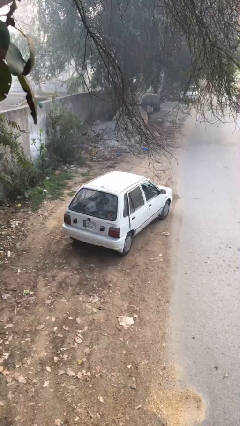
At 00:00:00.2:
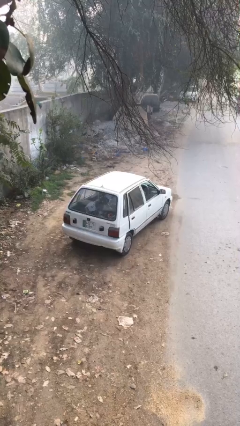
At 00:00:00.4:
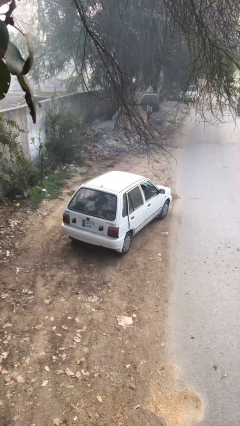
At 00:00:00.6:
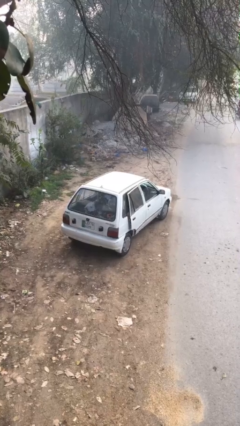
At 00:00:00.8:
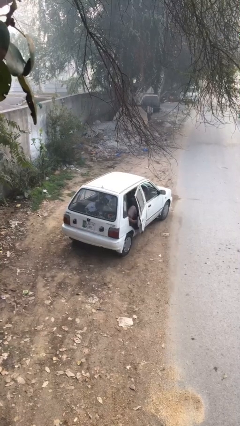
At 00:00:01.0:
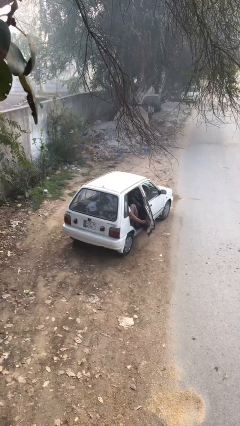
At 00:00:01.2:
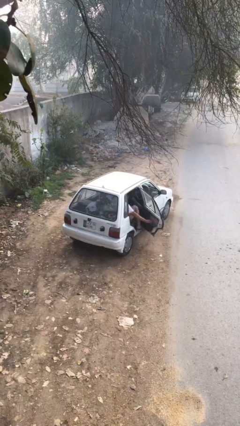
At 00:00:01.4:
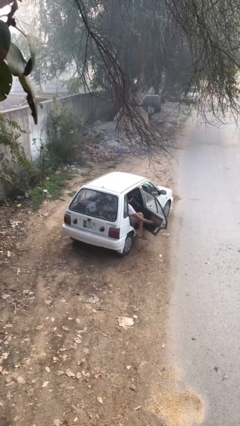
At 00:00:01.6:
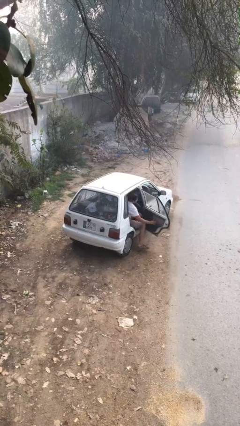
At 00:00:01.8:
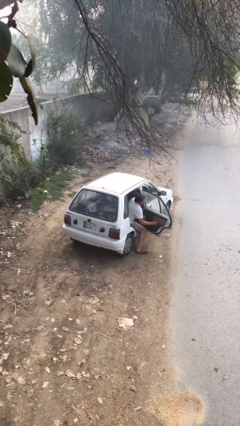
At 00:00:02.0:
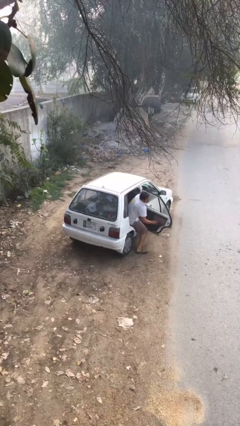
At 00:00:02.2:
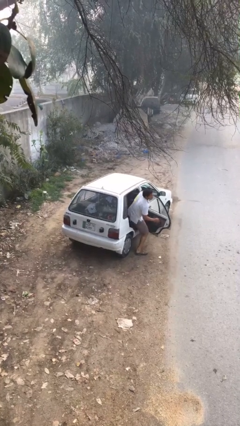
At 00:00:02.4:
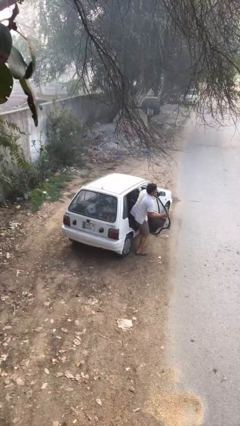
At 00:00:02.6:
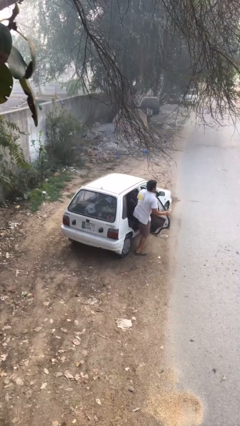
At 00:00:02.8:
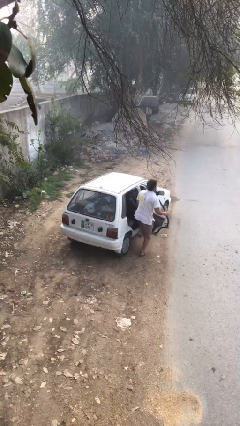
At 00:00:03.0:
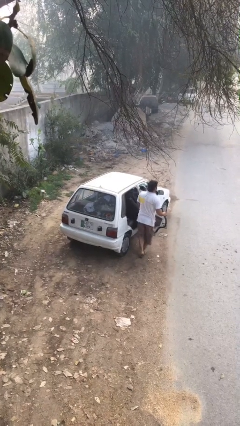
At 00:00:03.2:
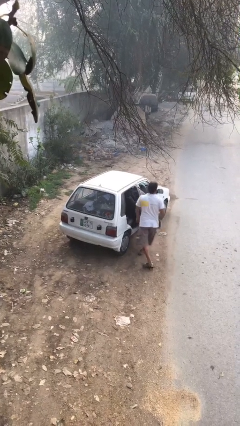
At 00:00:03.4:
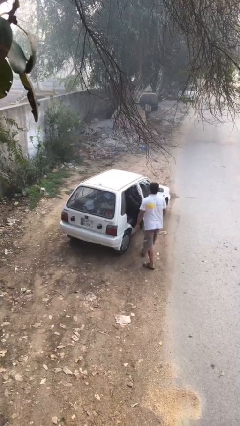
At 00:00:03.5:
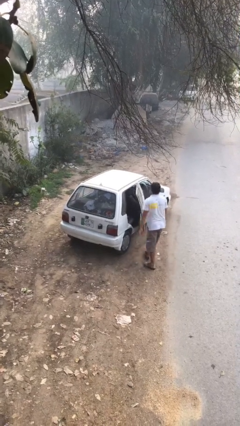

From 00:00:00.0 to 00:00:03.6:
car drops off person

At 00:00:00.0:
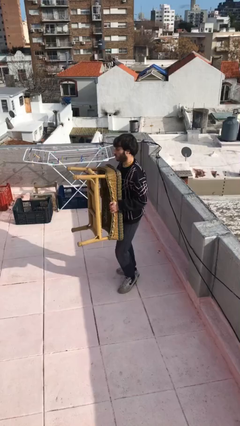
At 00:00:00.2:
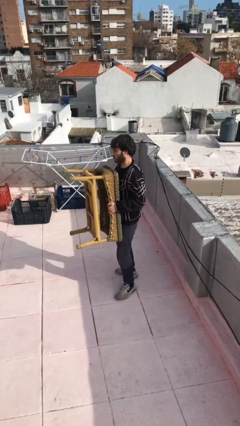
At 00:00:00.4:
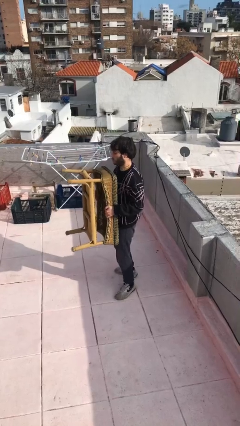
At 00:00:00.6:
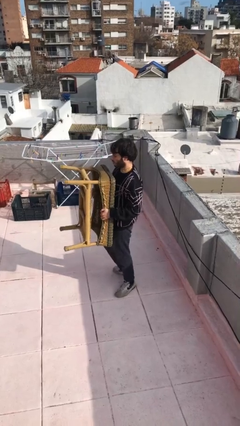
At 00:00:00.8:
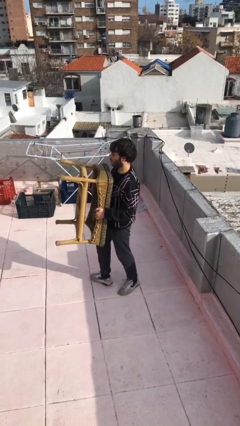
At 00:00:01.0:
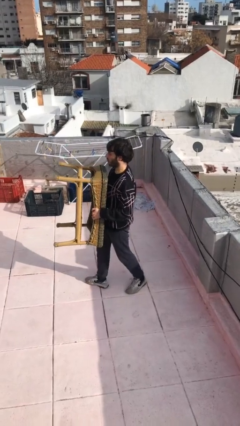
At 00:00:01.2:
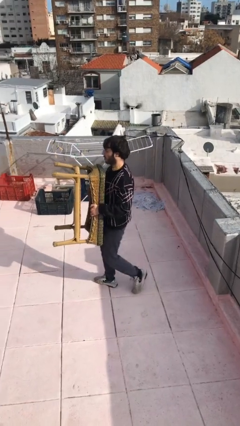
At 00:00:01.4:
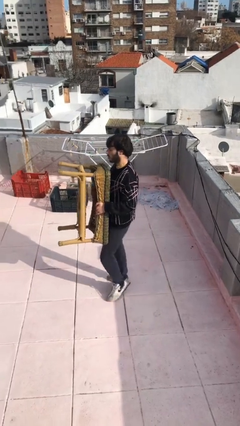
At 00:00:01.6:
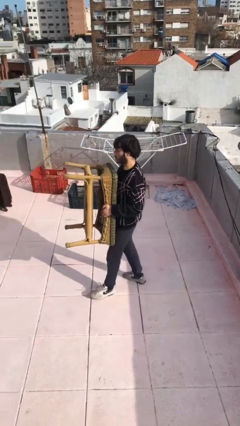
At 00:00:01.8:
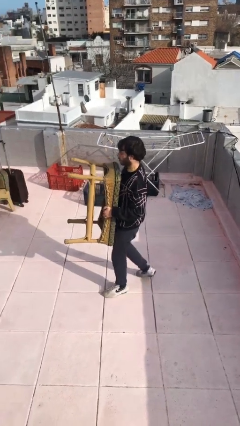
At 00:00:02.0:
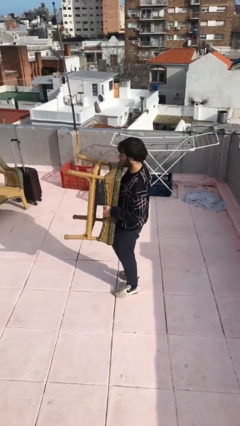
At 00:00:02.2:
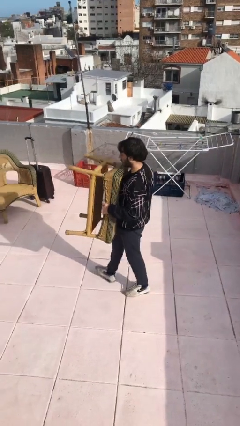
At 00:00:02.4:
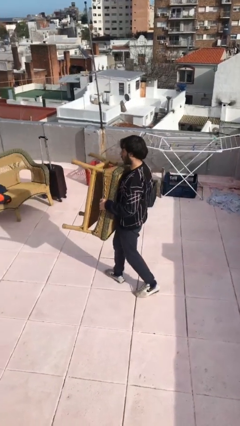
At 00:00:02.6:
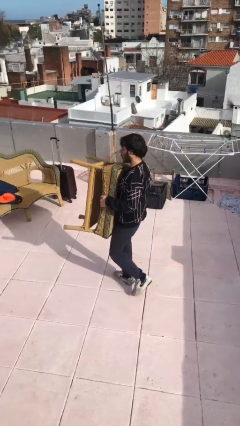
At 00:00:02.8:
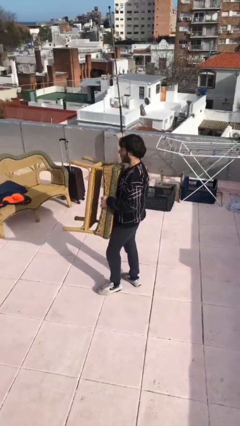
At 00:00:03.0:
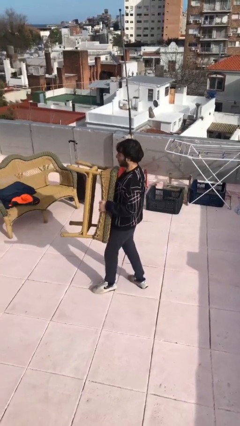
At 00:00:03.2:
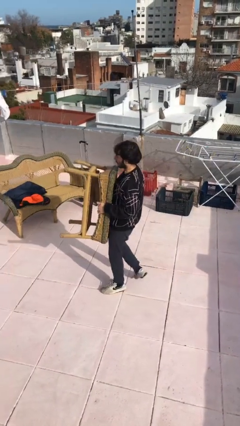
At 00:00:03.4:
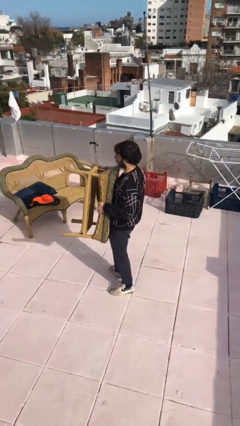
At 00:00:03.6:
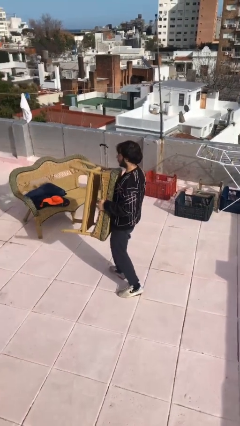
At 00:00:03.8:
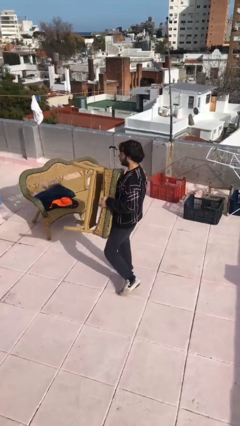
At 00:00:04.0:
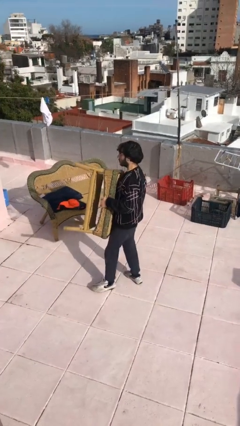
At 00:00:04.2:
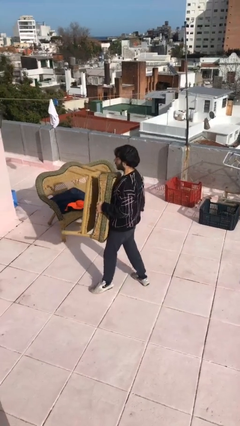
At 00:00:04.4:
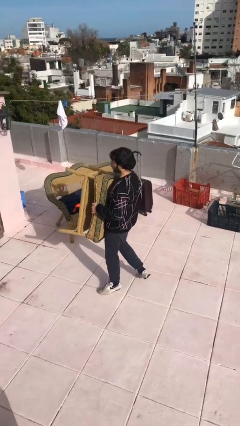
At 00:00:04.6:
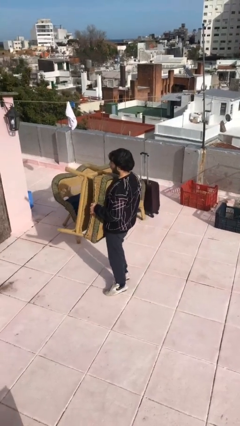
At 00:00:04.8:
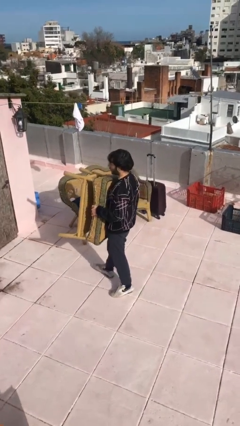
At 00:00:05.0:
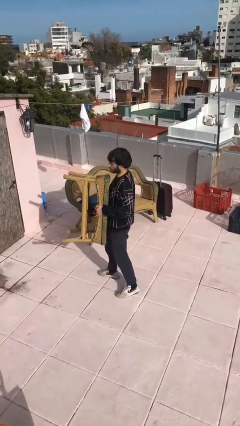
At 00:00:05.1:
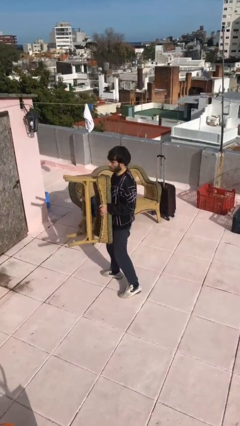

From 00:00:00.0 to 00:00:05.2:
person carries furniture

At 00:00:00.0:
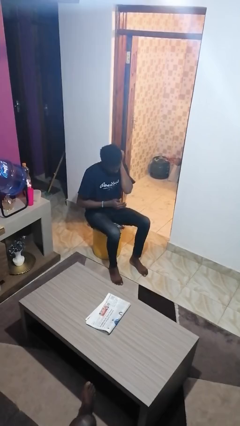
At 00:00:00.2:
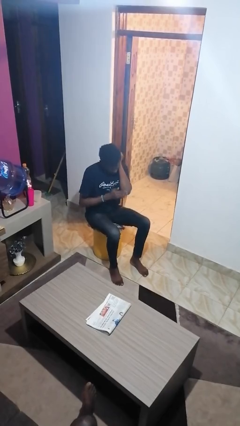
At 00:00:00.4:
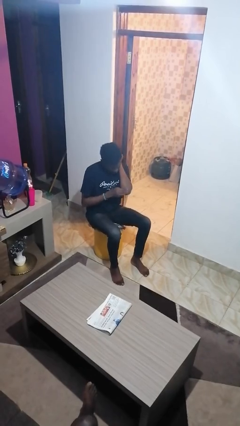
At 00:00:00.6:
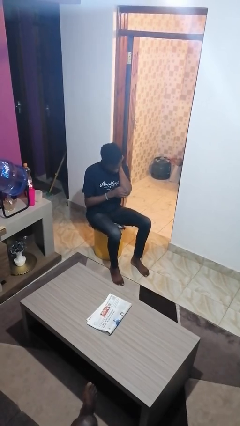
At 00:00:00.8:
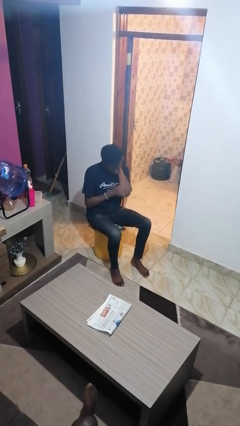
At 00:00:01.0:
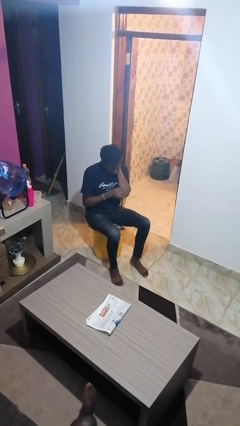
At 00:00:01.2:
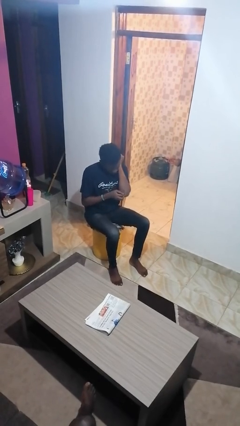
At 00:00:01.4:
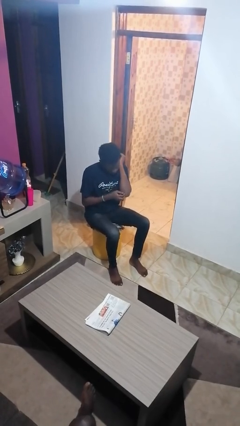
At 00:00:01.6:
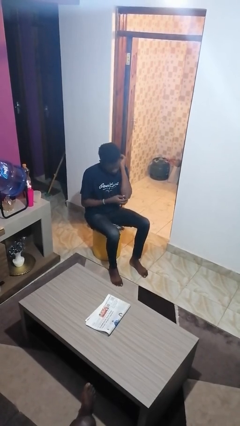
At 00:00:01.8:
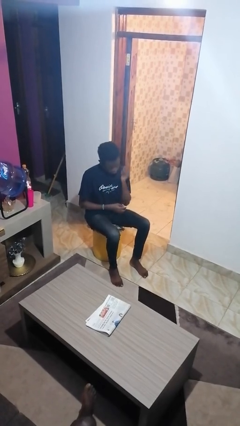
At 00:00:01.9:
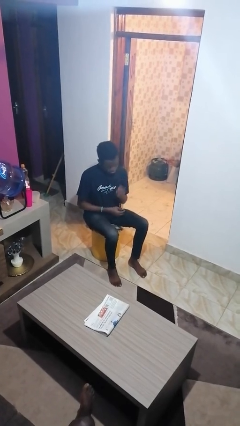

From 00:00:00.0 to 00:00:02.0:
person swats bug

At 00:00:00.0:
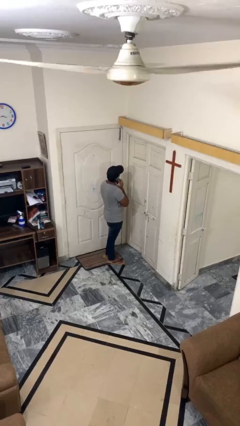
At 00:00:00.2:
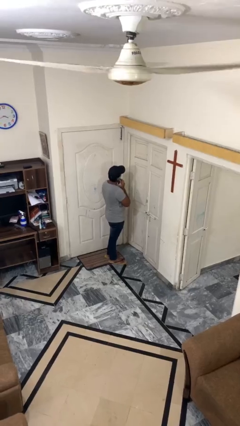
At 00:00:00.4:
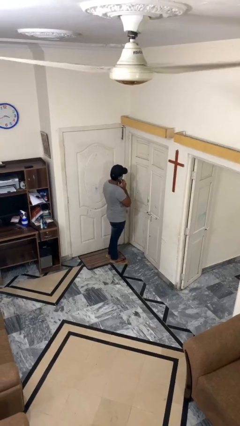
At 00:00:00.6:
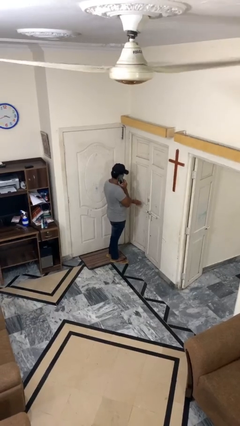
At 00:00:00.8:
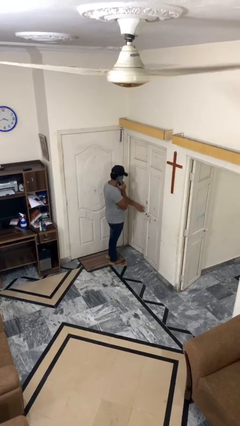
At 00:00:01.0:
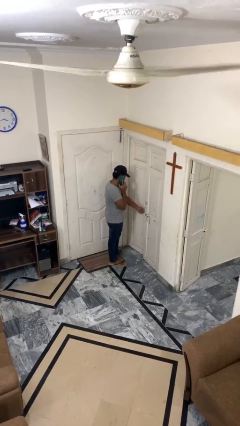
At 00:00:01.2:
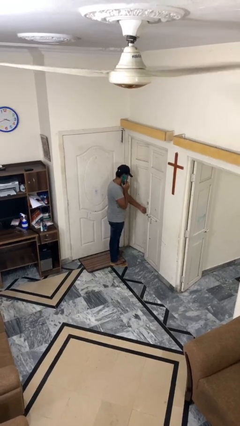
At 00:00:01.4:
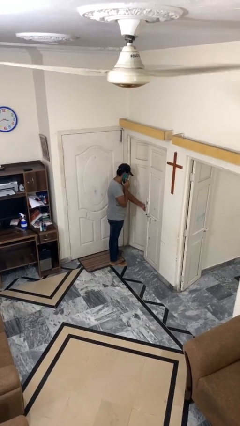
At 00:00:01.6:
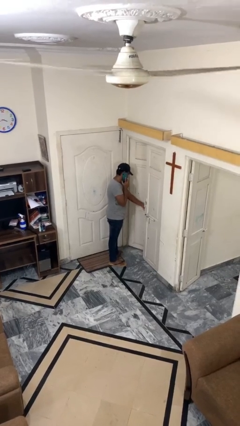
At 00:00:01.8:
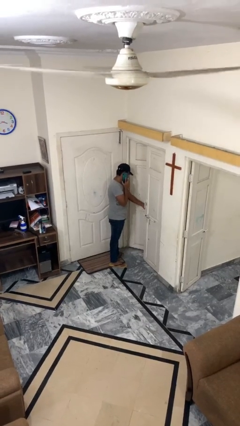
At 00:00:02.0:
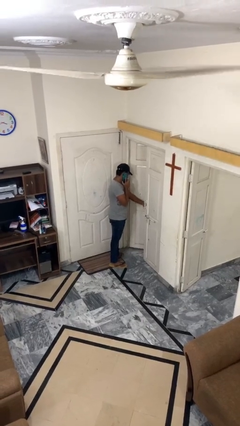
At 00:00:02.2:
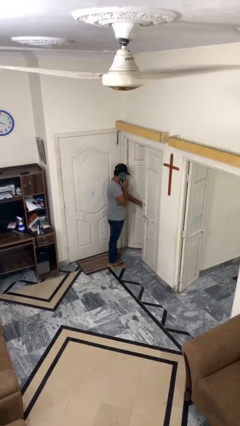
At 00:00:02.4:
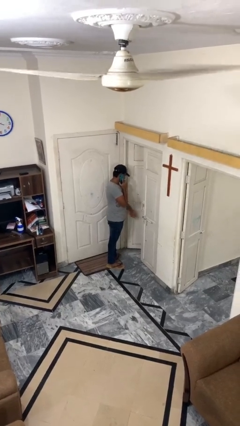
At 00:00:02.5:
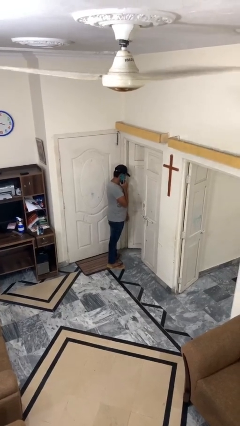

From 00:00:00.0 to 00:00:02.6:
person opens facility door

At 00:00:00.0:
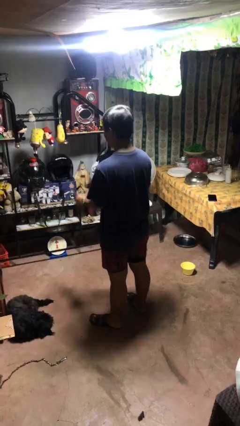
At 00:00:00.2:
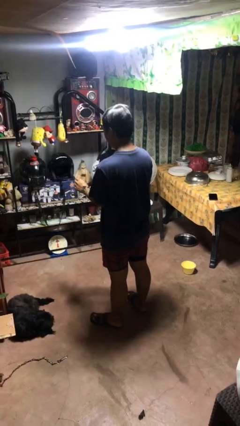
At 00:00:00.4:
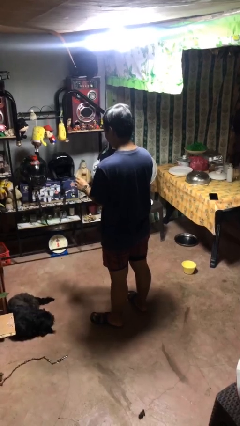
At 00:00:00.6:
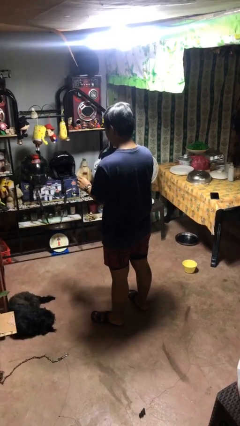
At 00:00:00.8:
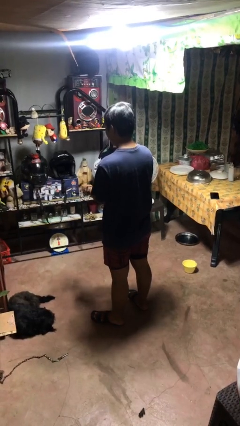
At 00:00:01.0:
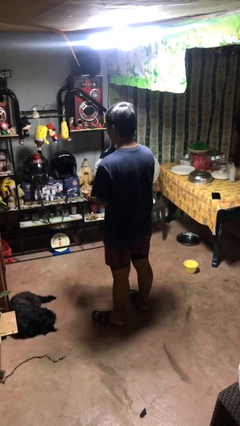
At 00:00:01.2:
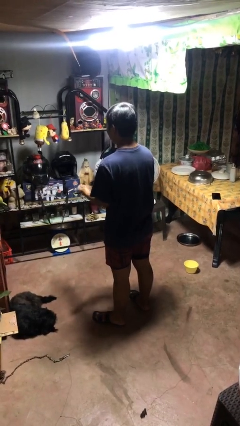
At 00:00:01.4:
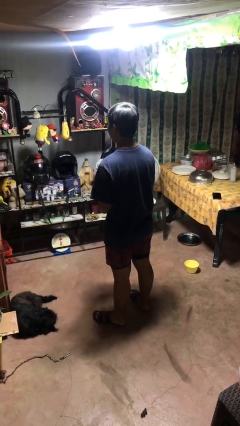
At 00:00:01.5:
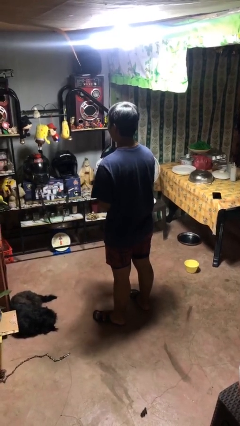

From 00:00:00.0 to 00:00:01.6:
person takes off wristwatch

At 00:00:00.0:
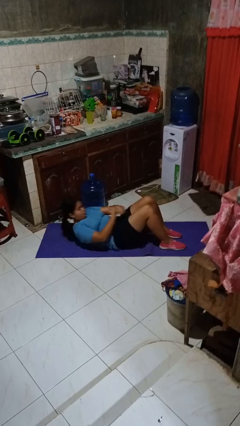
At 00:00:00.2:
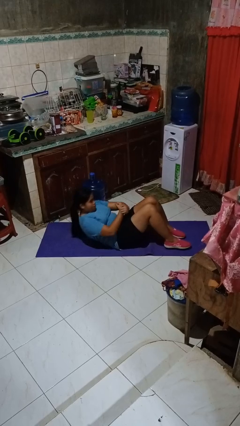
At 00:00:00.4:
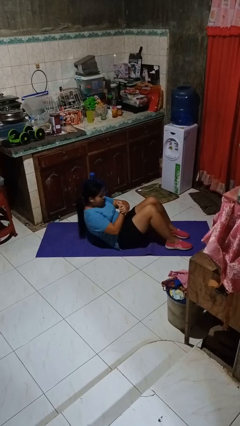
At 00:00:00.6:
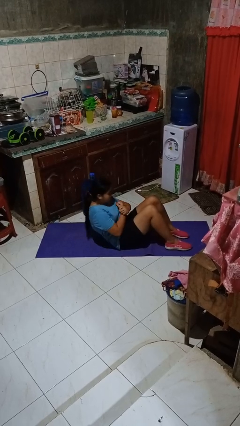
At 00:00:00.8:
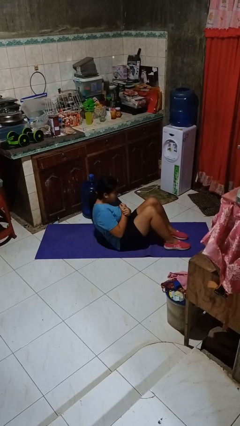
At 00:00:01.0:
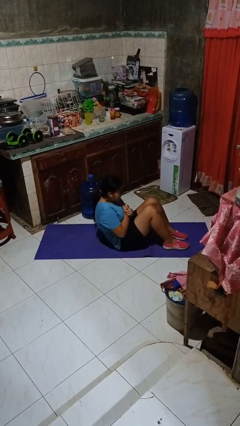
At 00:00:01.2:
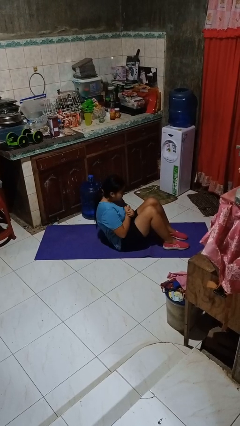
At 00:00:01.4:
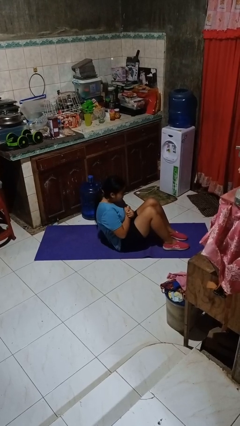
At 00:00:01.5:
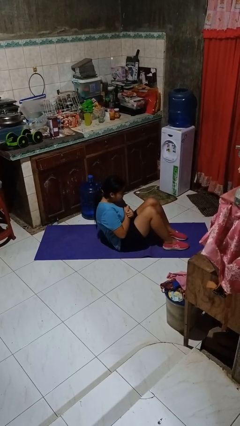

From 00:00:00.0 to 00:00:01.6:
person exercises with situp
